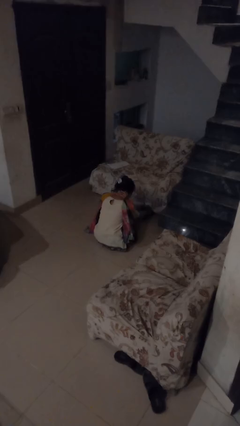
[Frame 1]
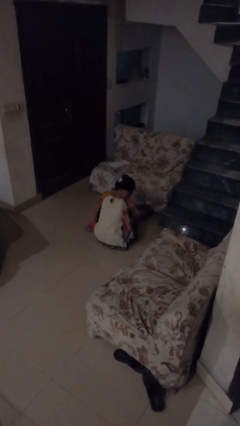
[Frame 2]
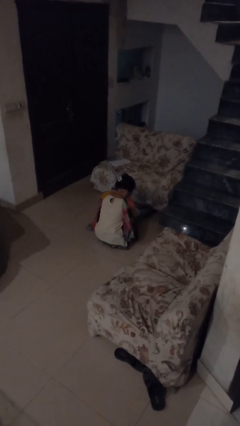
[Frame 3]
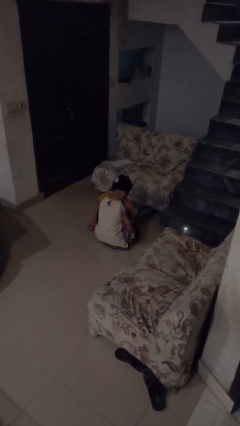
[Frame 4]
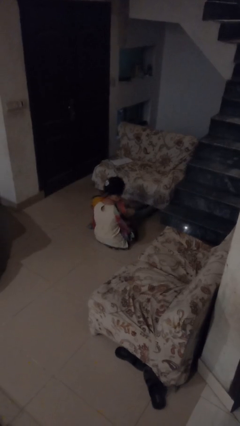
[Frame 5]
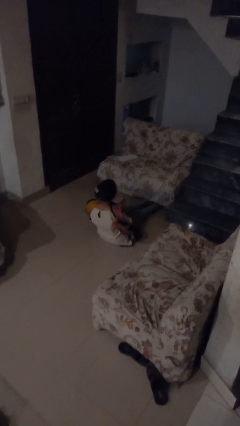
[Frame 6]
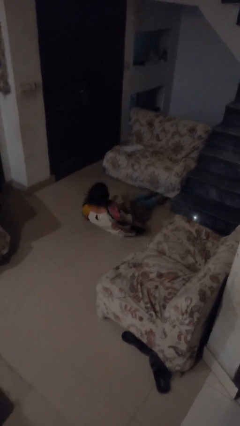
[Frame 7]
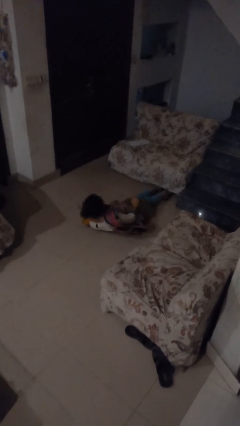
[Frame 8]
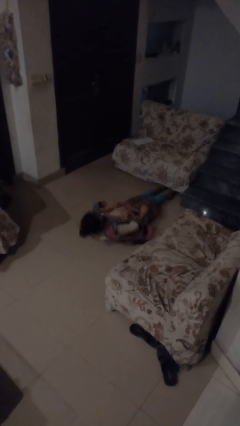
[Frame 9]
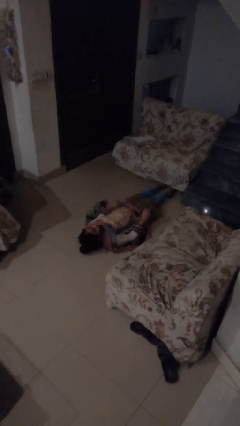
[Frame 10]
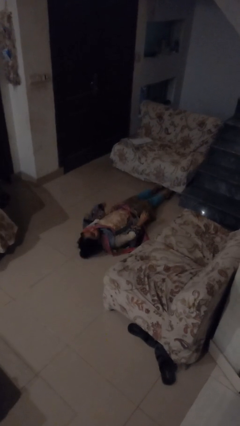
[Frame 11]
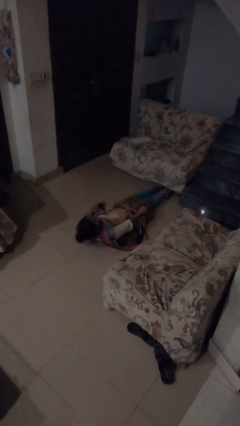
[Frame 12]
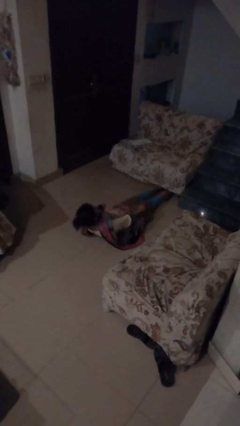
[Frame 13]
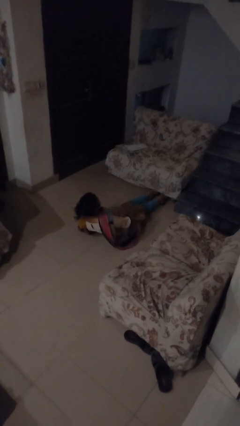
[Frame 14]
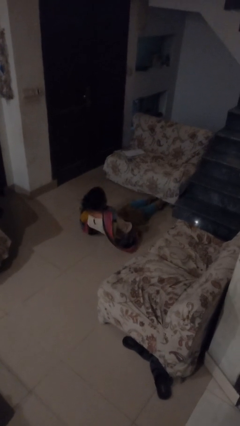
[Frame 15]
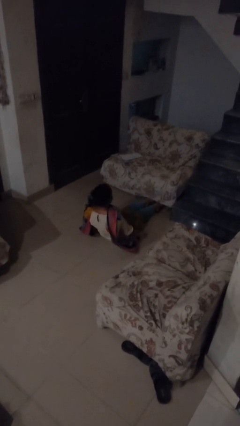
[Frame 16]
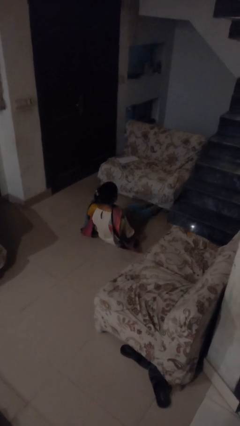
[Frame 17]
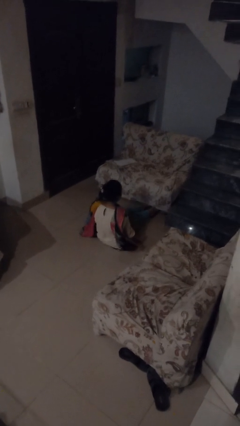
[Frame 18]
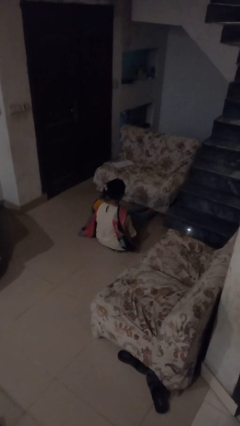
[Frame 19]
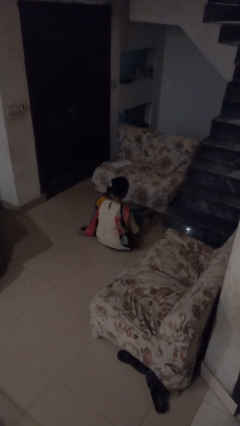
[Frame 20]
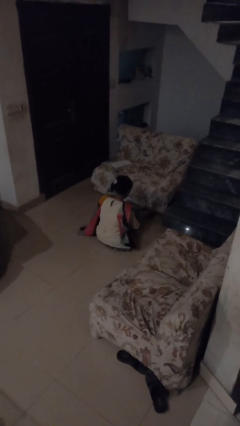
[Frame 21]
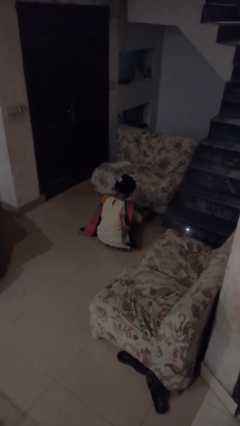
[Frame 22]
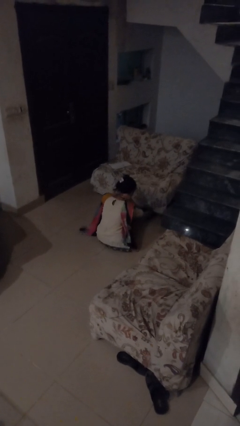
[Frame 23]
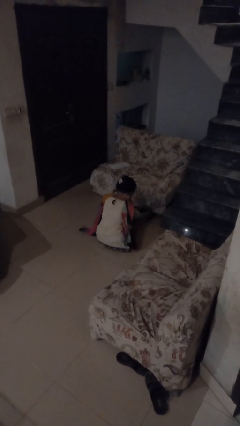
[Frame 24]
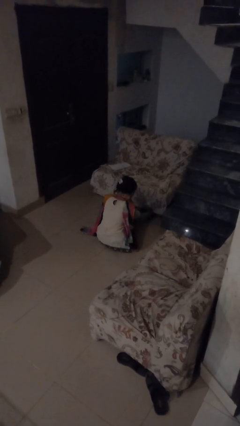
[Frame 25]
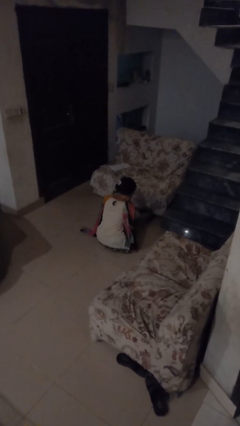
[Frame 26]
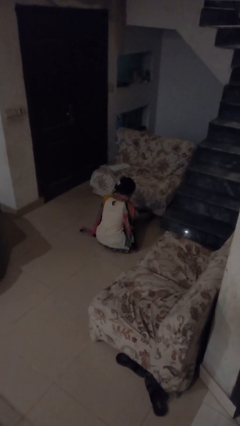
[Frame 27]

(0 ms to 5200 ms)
person exercises with situp

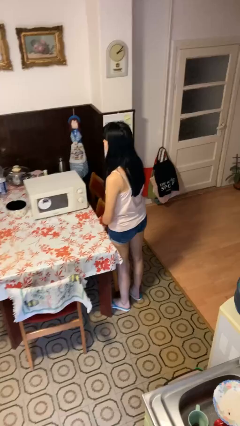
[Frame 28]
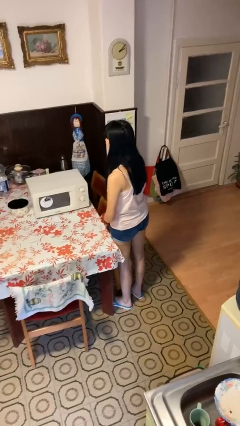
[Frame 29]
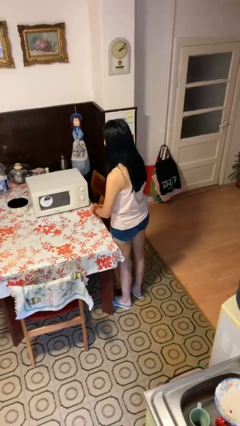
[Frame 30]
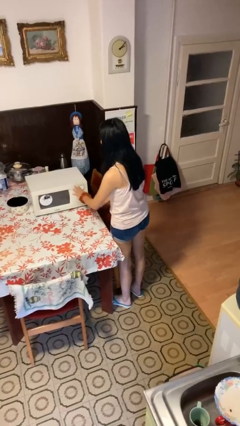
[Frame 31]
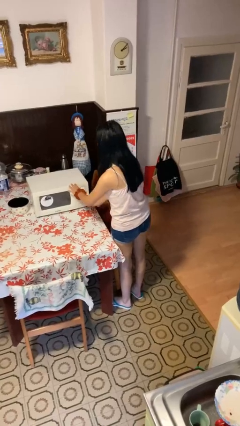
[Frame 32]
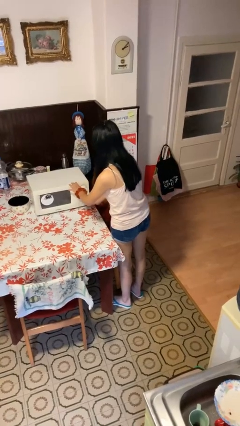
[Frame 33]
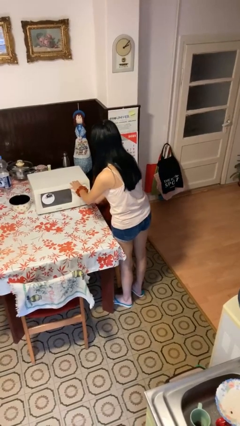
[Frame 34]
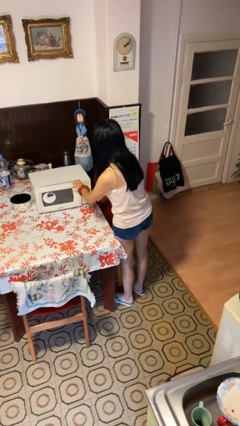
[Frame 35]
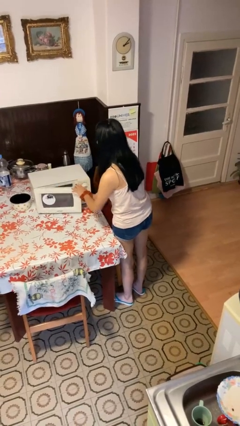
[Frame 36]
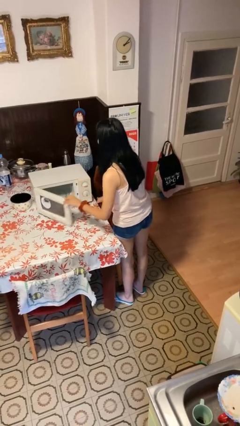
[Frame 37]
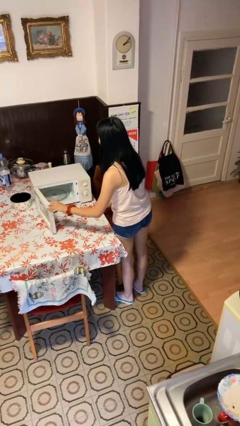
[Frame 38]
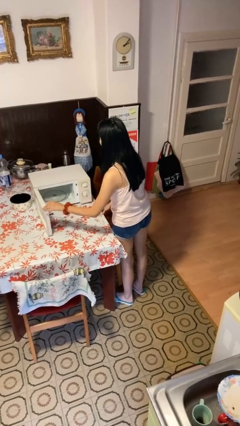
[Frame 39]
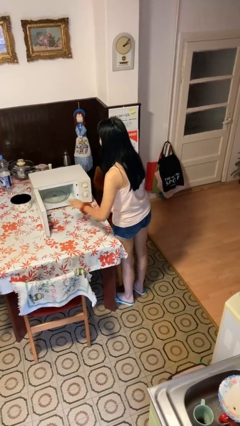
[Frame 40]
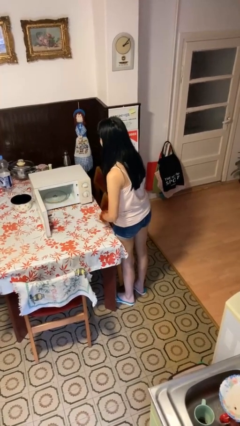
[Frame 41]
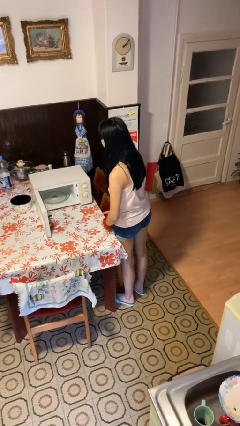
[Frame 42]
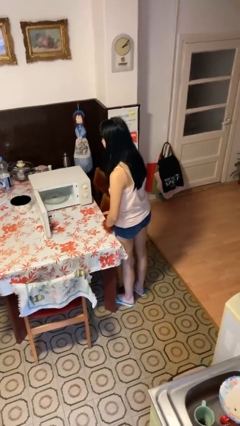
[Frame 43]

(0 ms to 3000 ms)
person opens microwave

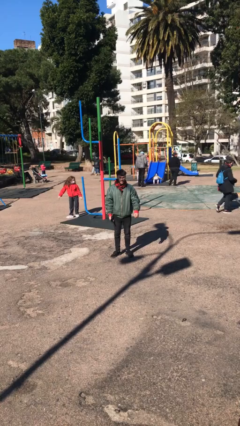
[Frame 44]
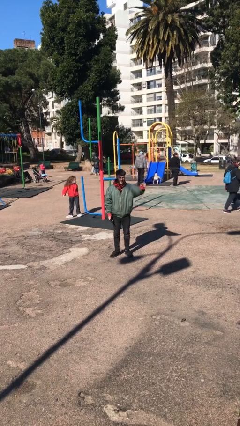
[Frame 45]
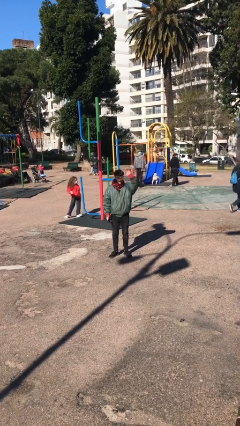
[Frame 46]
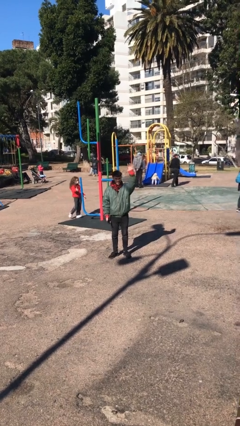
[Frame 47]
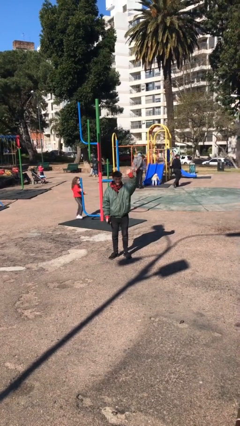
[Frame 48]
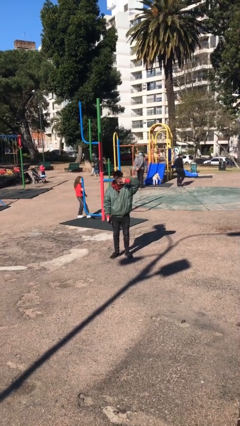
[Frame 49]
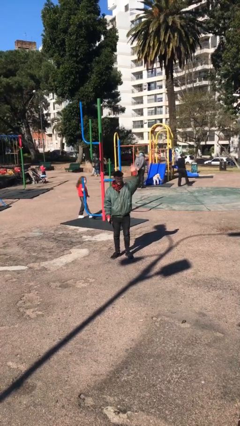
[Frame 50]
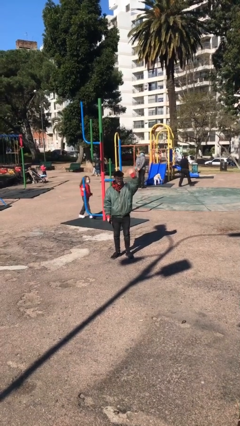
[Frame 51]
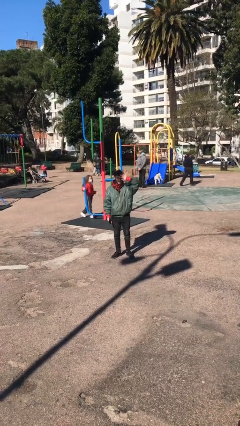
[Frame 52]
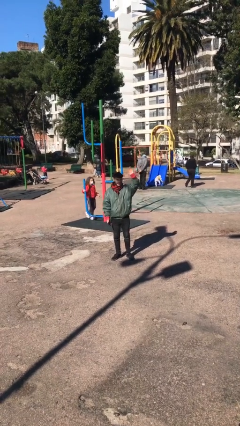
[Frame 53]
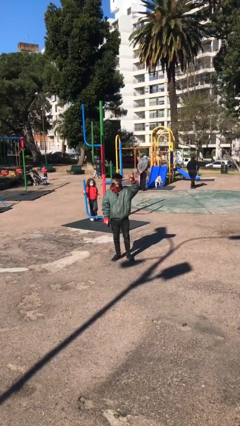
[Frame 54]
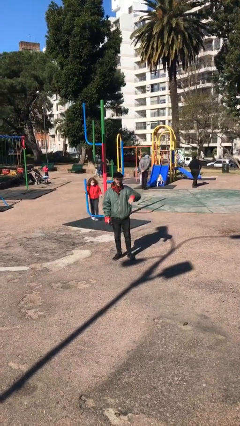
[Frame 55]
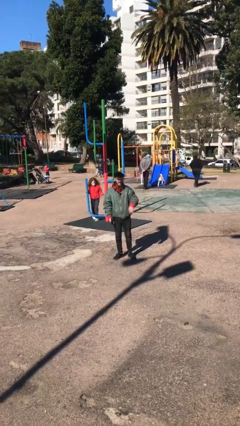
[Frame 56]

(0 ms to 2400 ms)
person waves at person

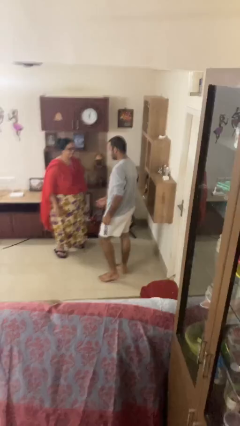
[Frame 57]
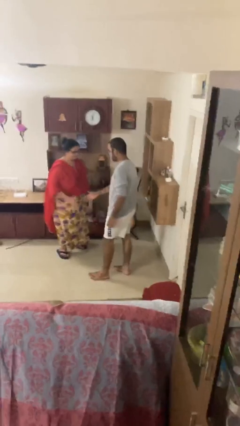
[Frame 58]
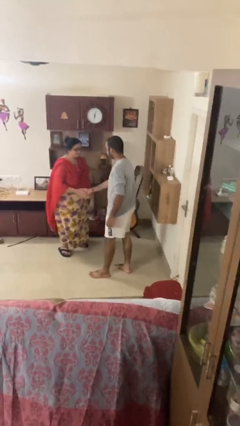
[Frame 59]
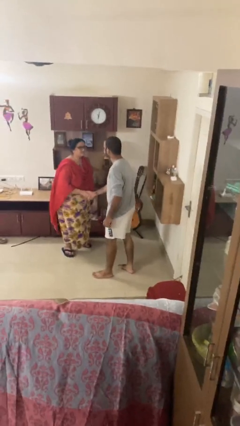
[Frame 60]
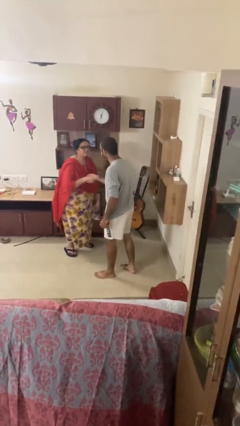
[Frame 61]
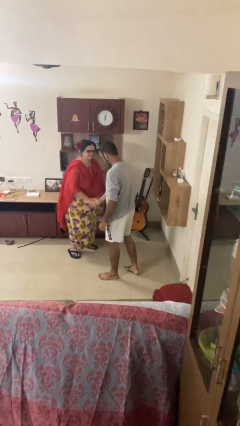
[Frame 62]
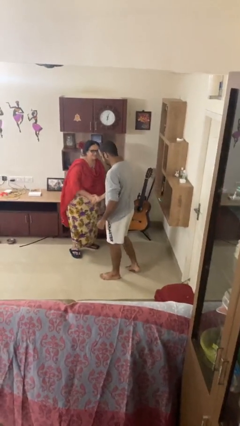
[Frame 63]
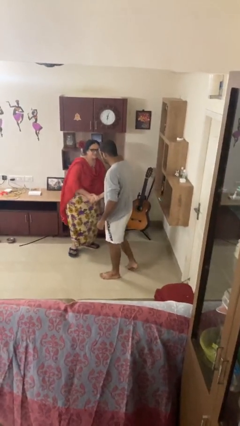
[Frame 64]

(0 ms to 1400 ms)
person shakes hand

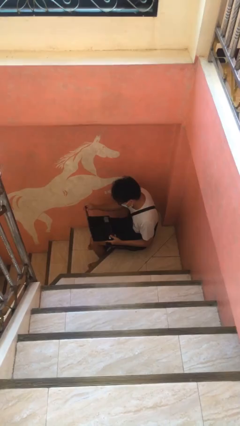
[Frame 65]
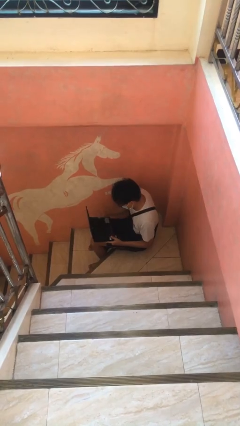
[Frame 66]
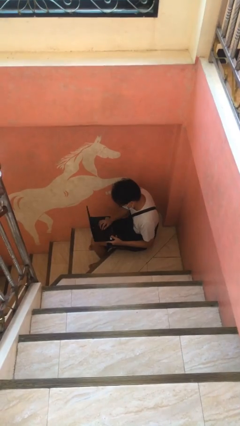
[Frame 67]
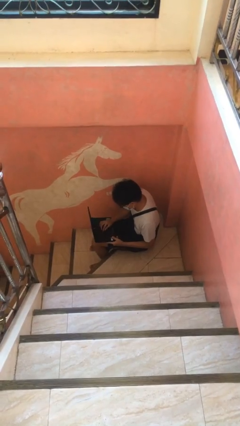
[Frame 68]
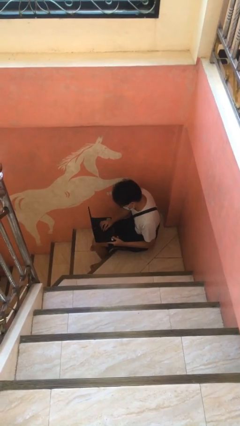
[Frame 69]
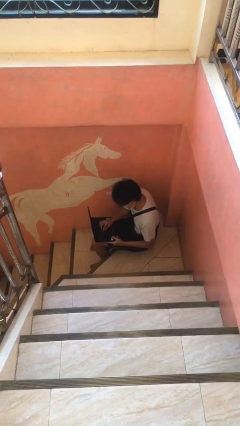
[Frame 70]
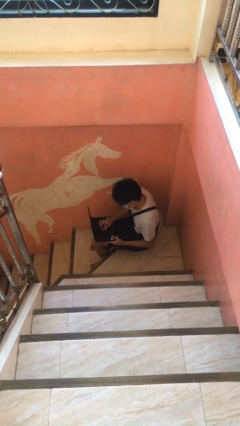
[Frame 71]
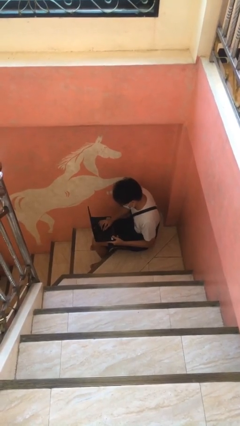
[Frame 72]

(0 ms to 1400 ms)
person interacts with laptop

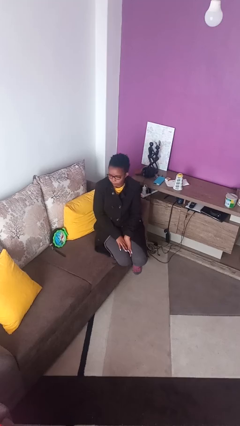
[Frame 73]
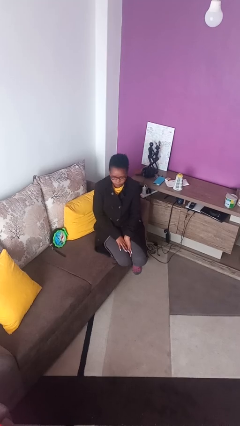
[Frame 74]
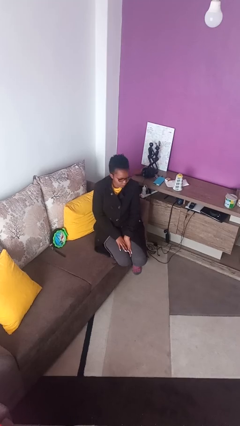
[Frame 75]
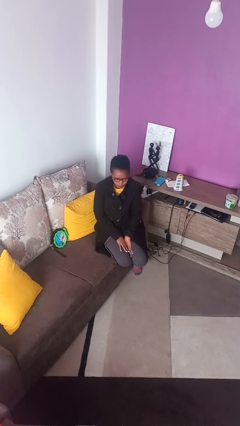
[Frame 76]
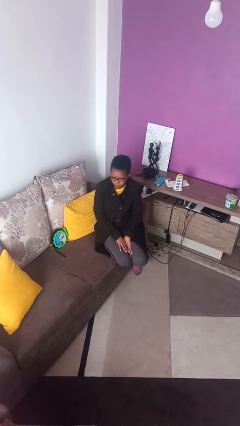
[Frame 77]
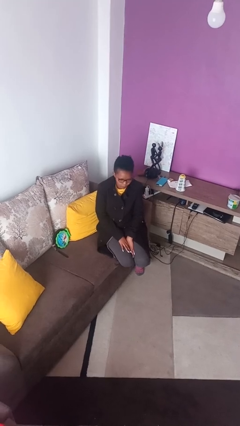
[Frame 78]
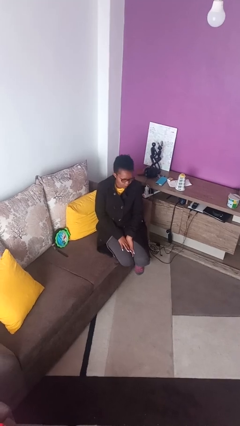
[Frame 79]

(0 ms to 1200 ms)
person shakes head

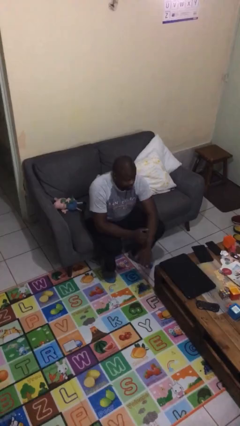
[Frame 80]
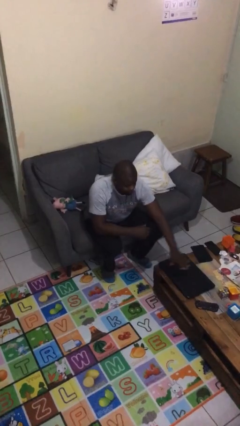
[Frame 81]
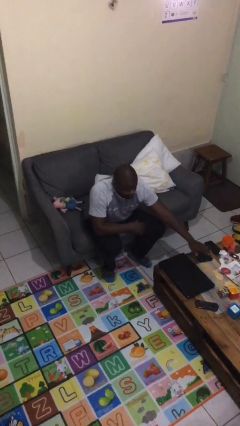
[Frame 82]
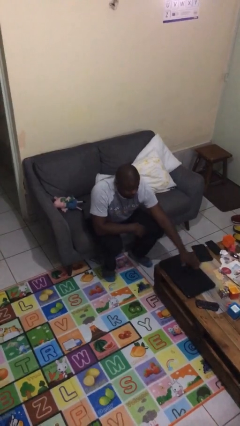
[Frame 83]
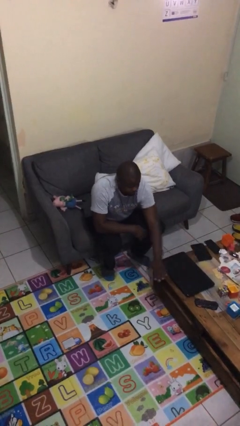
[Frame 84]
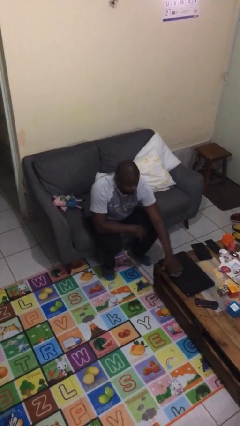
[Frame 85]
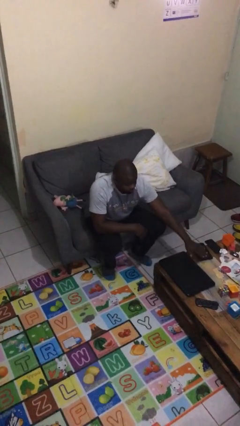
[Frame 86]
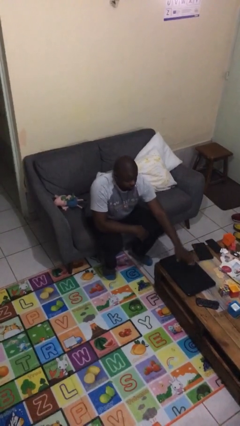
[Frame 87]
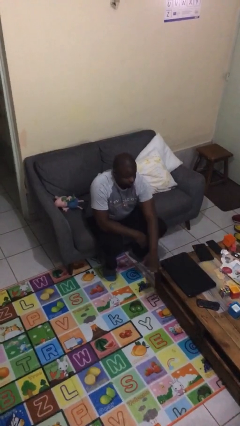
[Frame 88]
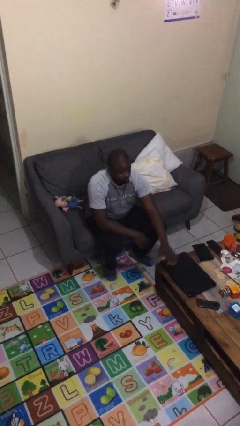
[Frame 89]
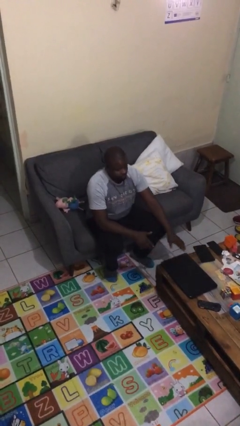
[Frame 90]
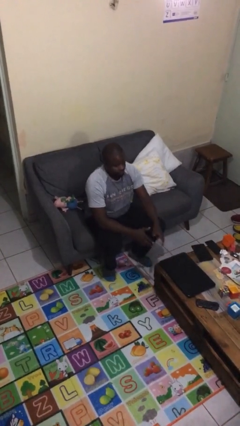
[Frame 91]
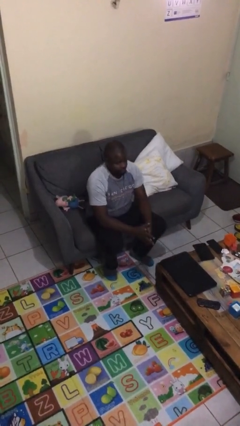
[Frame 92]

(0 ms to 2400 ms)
person waves hand over object
